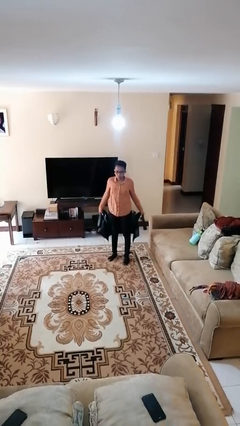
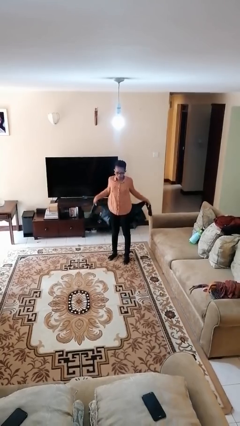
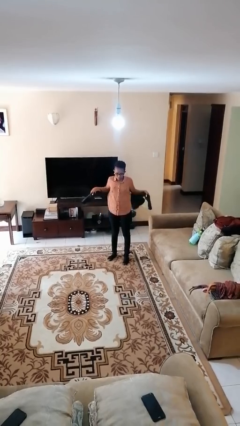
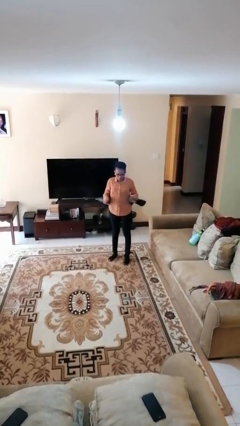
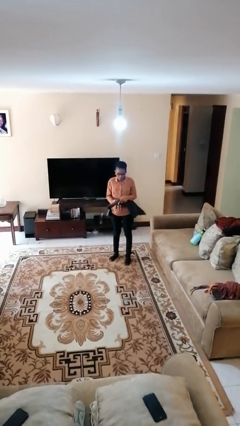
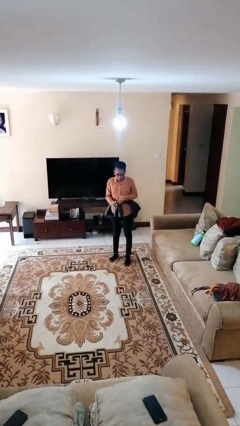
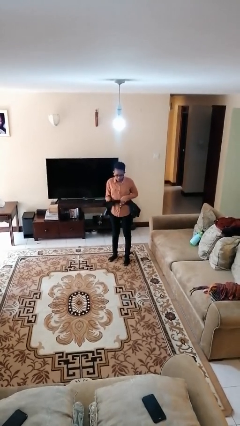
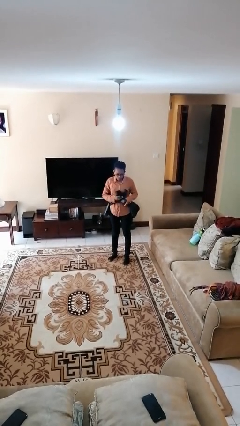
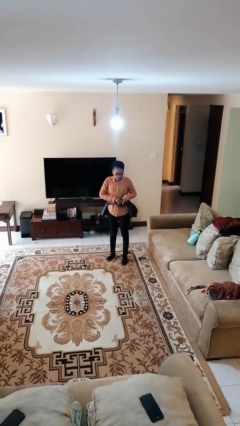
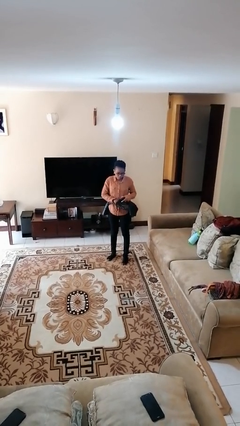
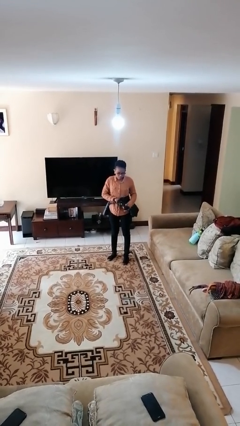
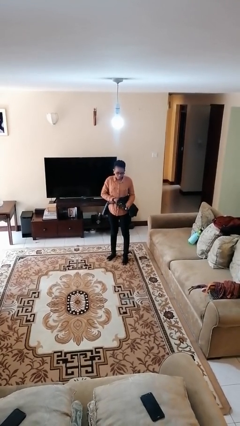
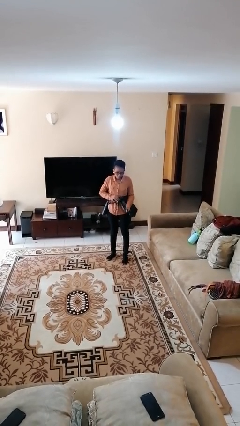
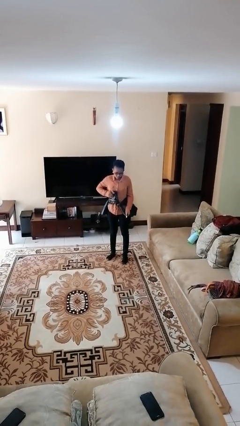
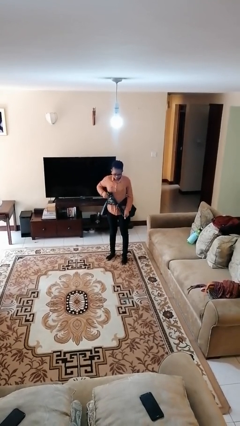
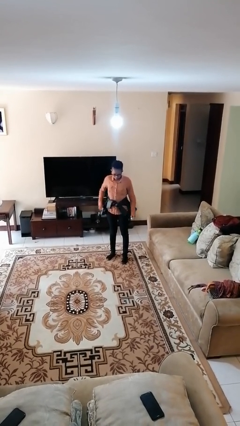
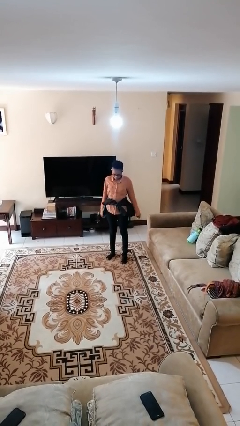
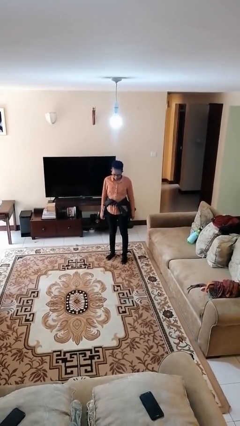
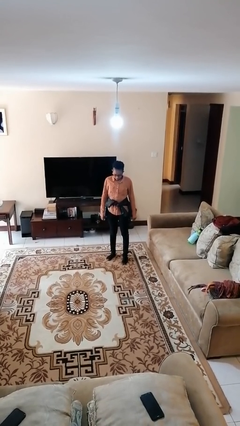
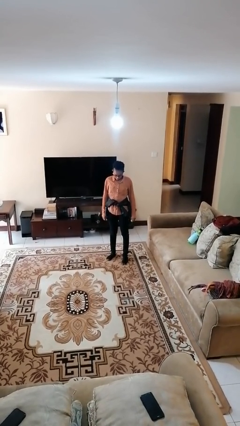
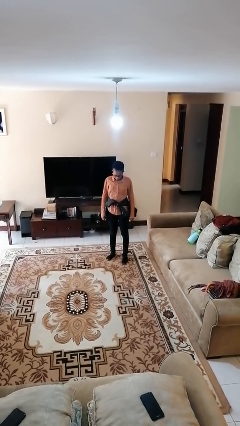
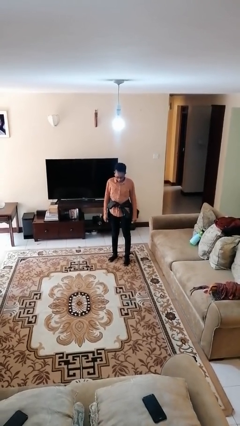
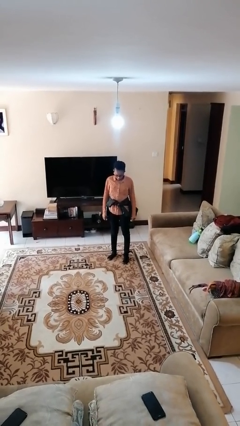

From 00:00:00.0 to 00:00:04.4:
person ties jacket around waist

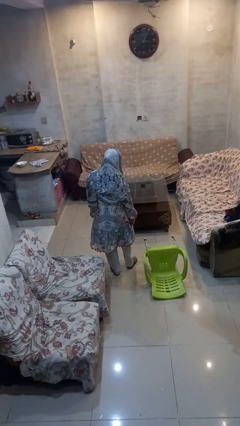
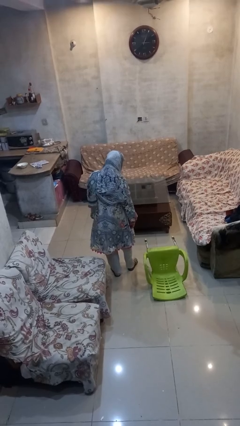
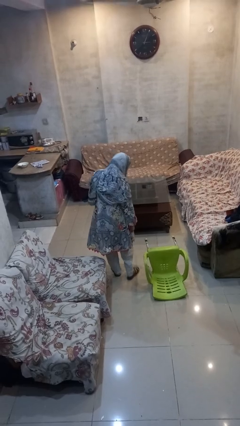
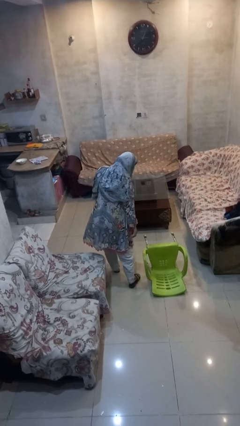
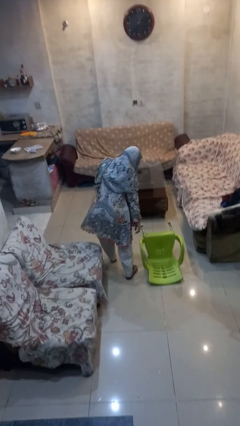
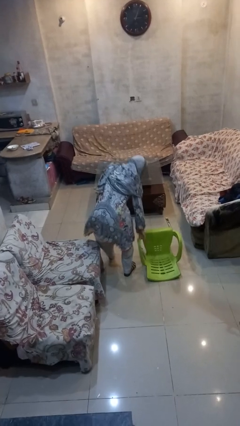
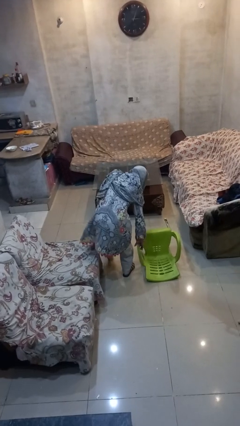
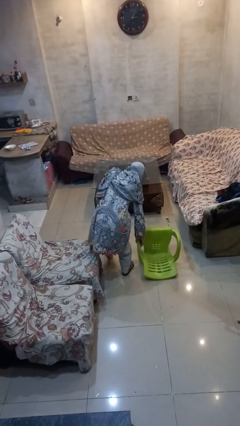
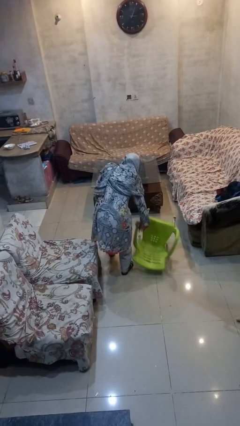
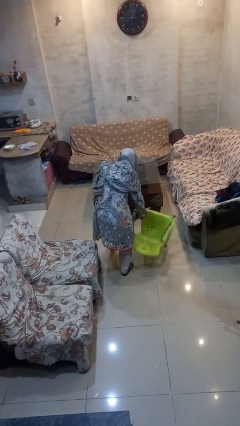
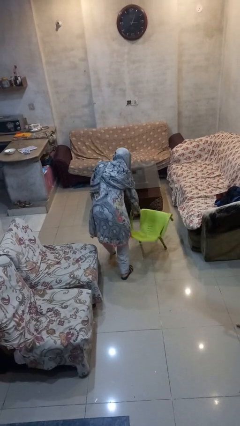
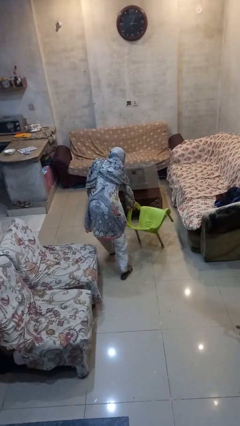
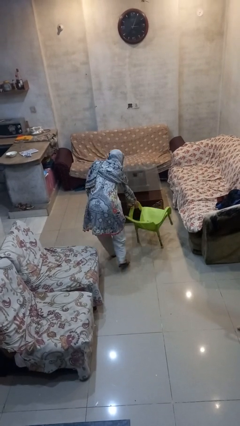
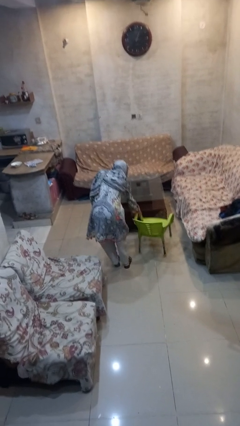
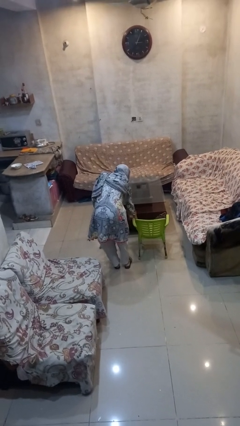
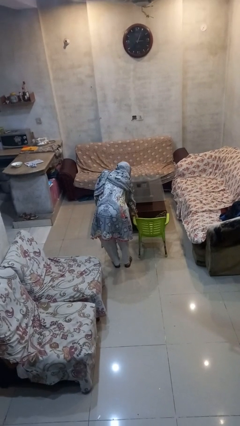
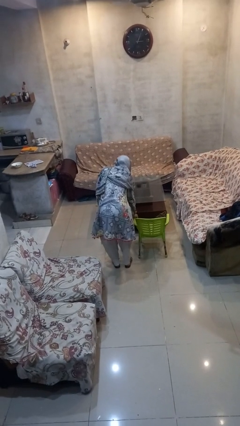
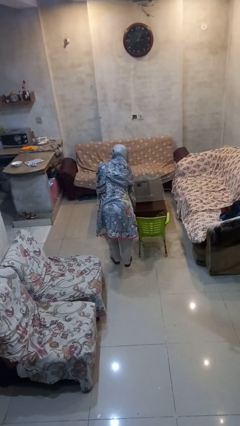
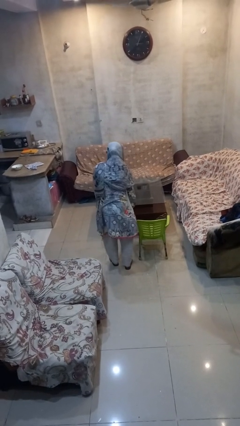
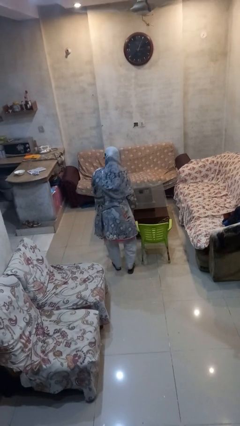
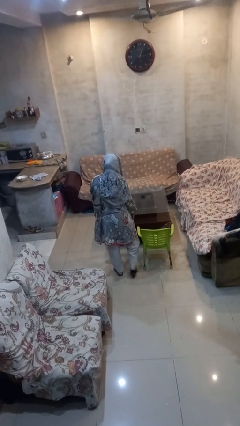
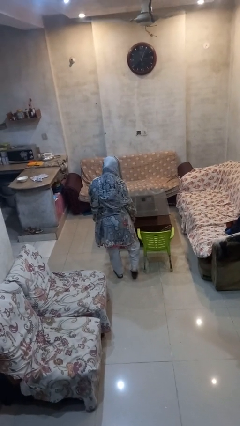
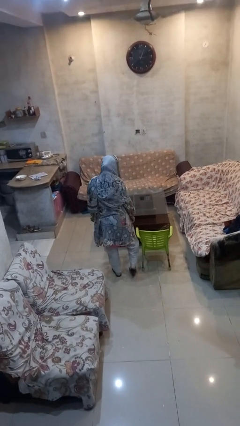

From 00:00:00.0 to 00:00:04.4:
person sets upright furniture

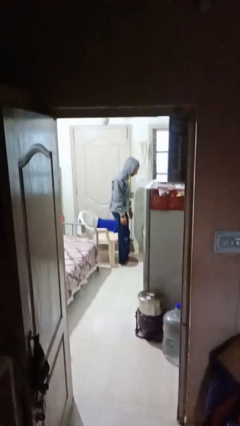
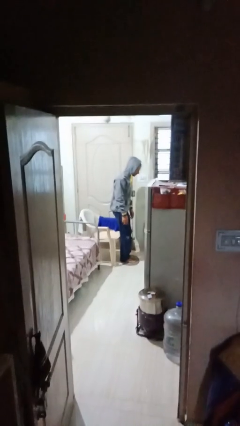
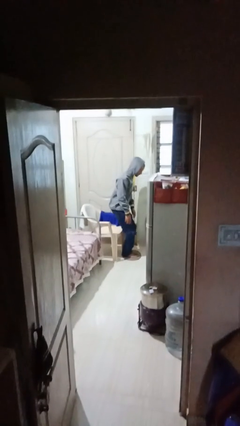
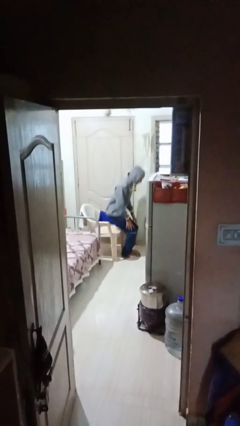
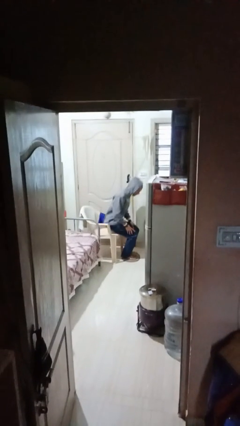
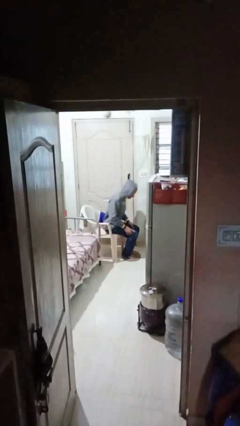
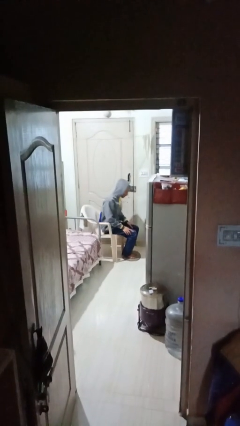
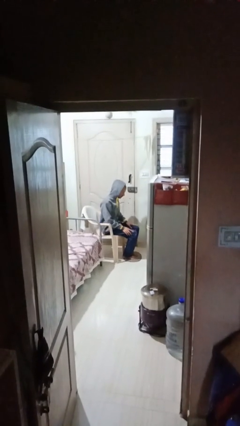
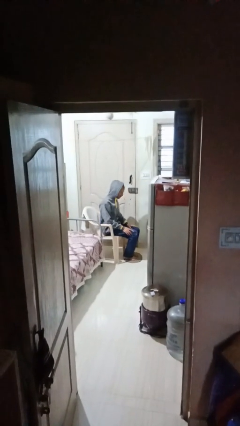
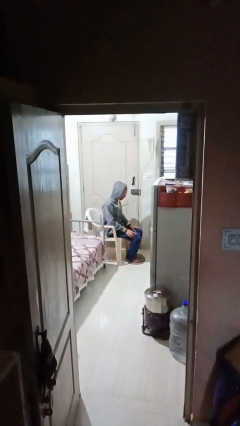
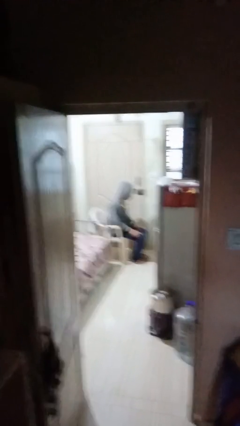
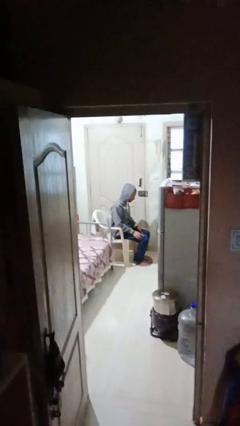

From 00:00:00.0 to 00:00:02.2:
person sits down

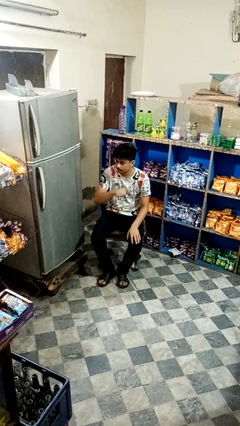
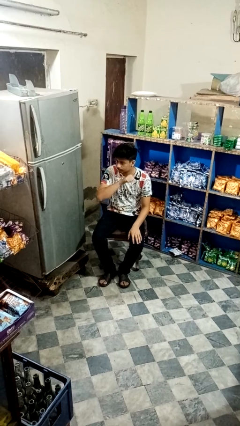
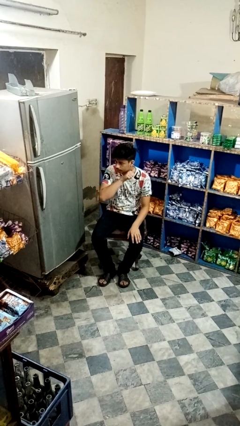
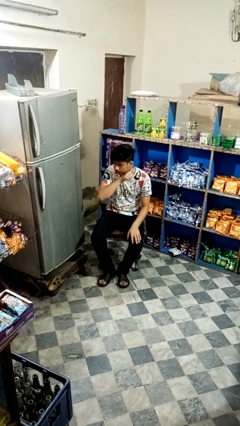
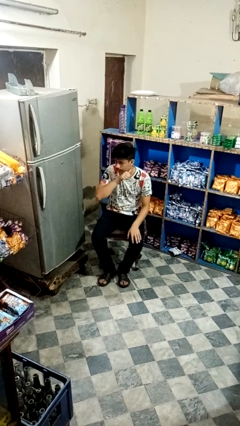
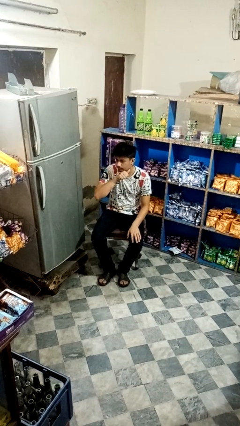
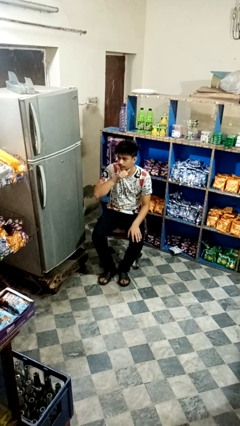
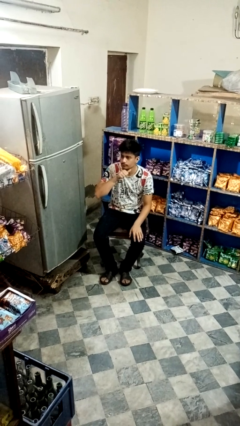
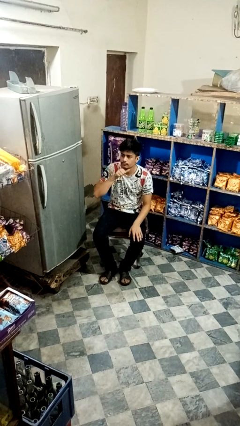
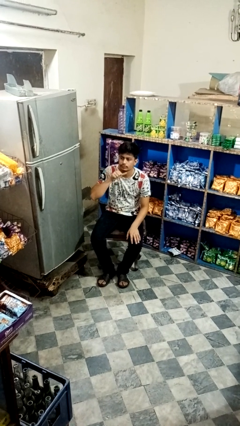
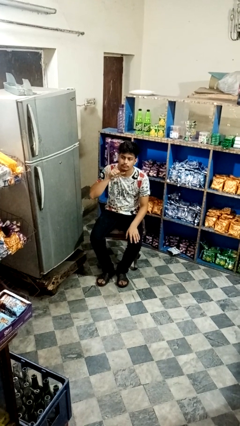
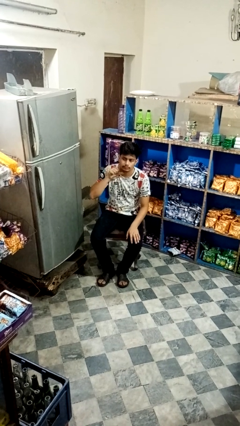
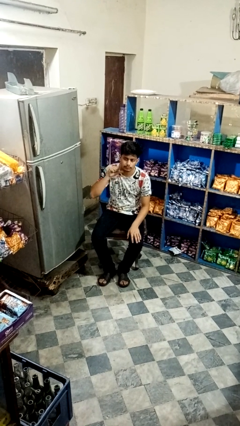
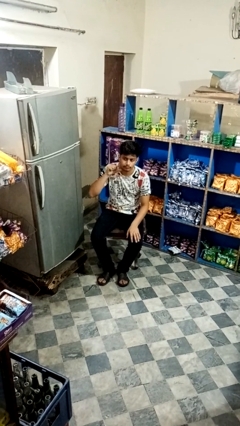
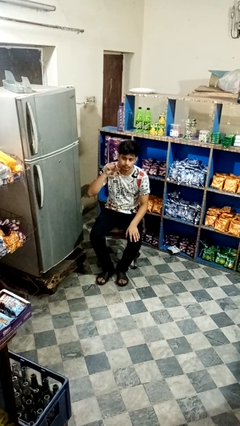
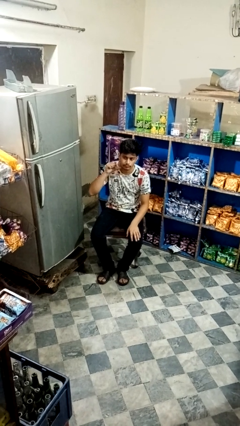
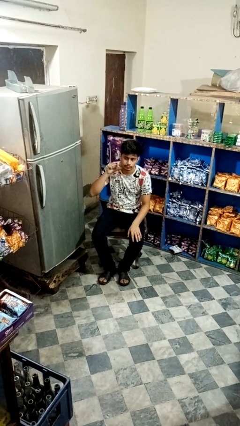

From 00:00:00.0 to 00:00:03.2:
person gestures cut

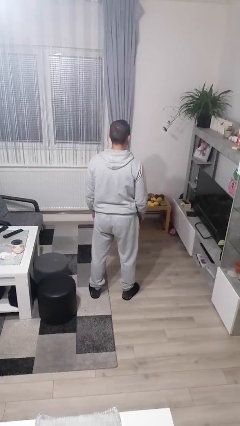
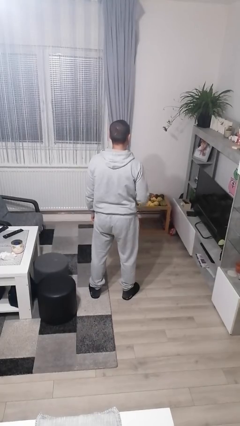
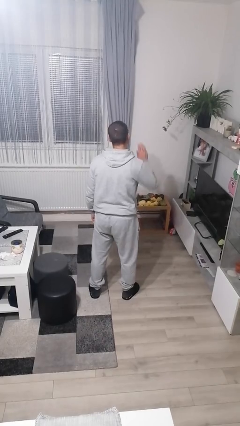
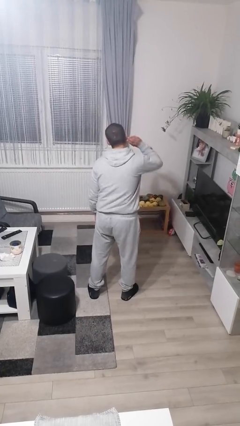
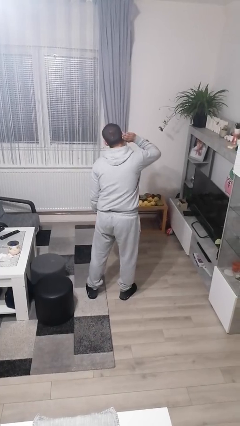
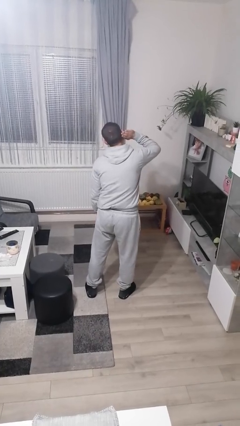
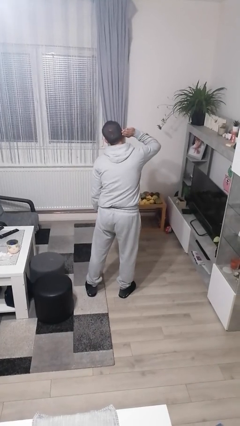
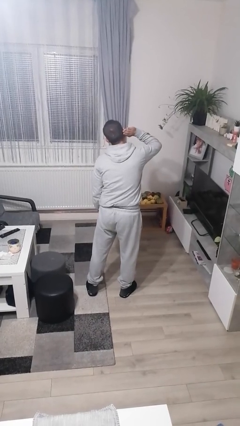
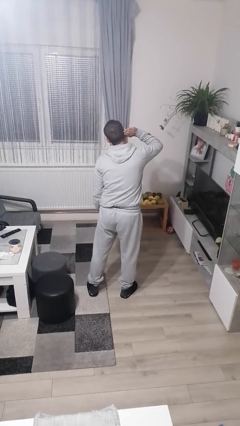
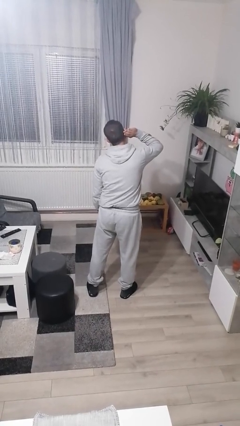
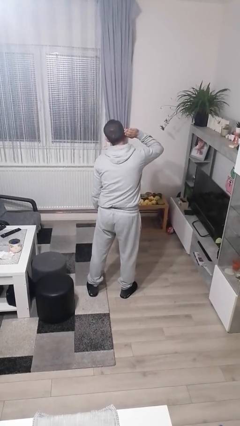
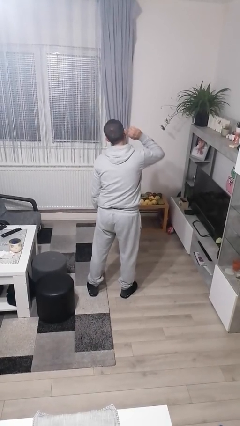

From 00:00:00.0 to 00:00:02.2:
person gestures listen closely

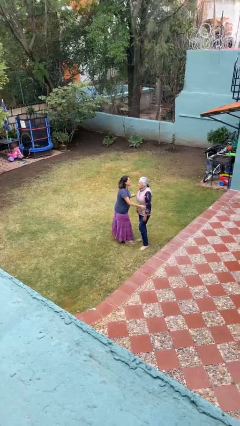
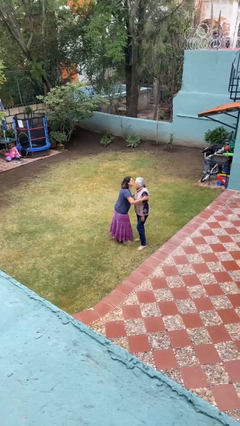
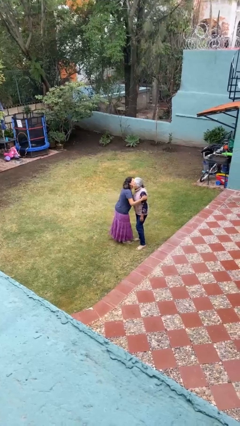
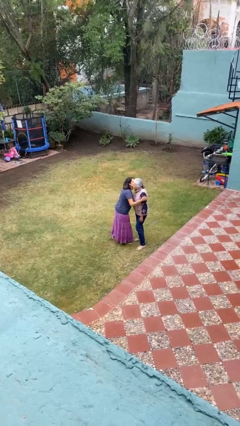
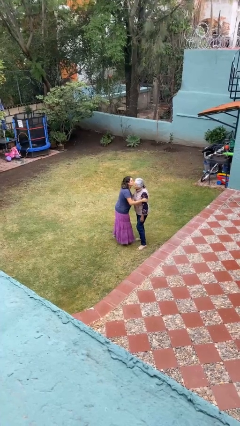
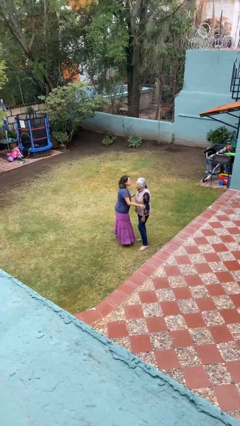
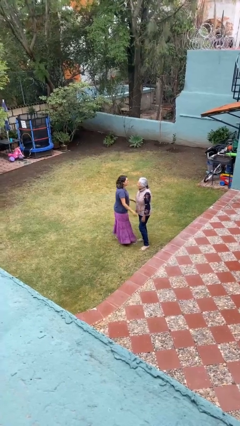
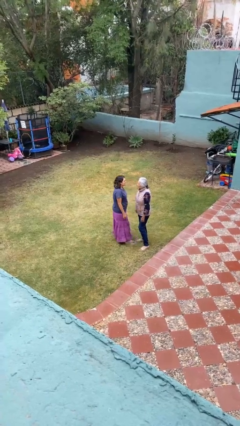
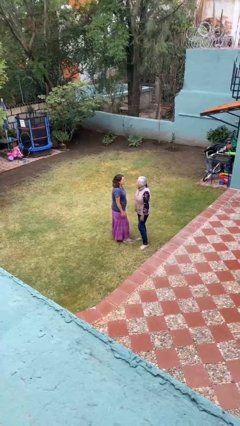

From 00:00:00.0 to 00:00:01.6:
person kisses cheek of person
